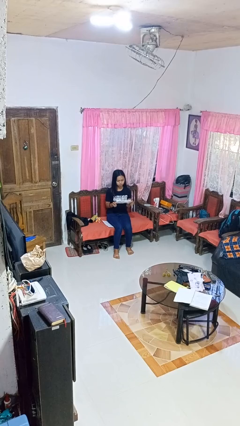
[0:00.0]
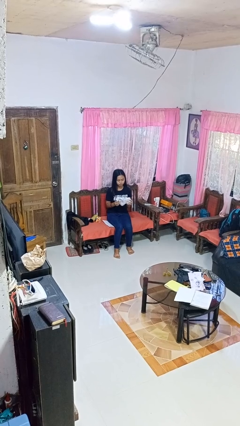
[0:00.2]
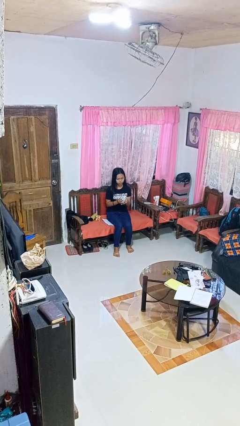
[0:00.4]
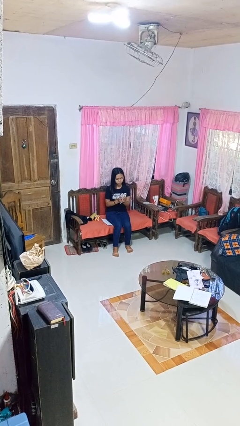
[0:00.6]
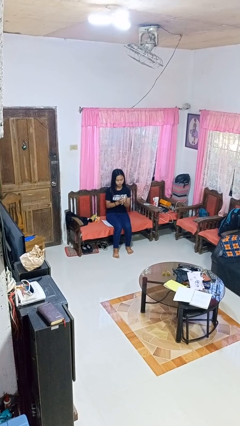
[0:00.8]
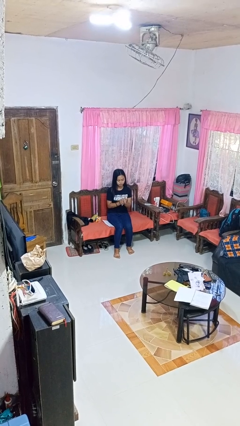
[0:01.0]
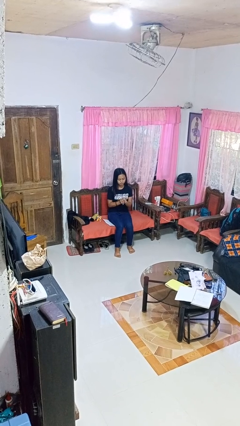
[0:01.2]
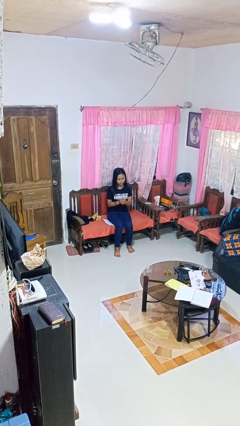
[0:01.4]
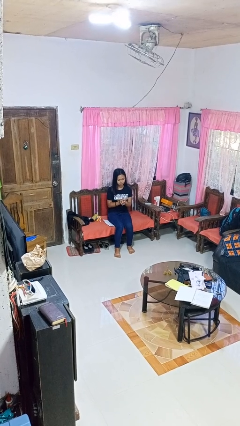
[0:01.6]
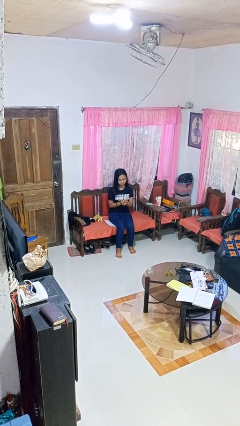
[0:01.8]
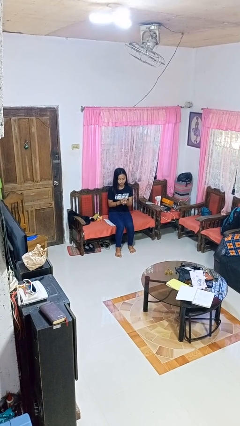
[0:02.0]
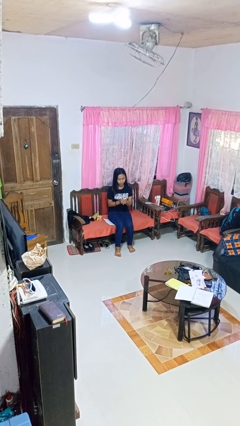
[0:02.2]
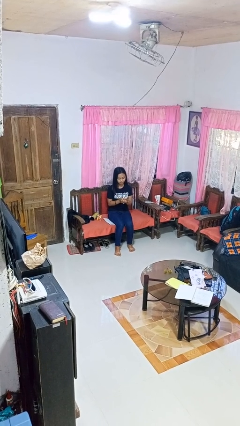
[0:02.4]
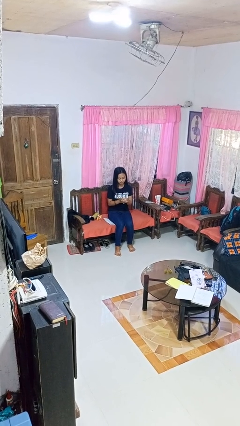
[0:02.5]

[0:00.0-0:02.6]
person crumples paper

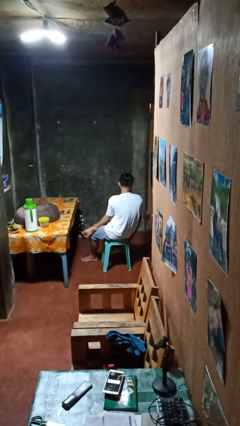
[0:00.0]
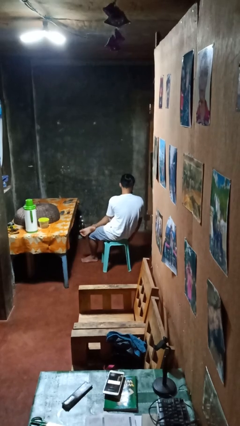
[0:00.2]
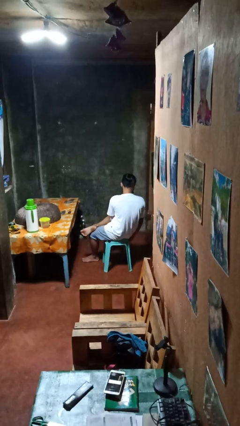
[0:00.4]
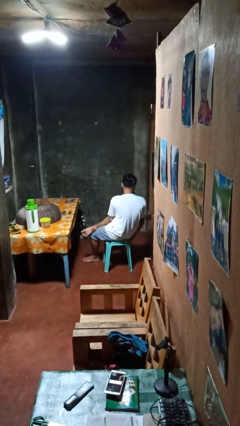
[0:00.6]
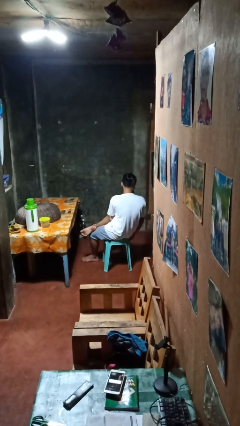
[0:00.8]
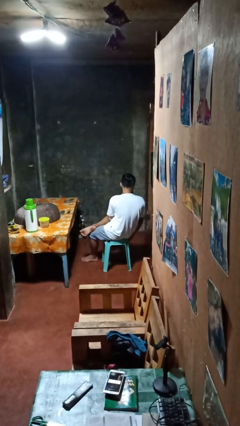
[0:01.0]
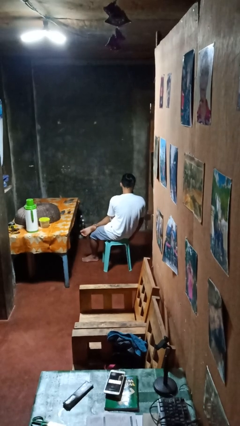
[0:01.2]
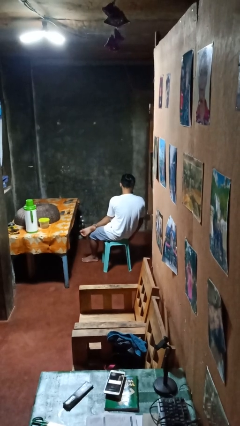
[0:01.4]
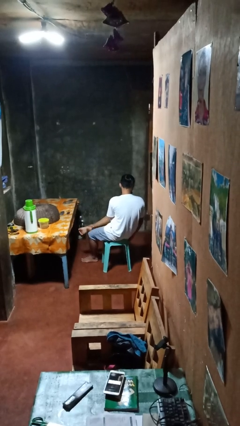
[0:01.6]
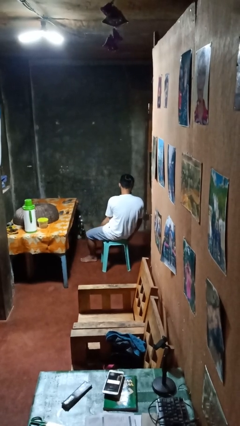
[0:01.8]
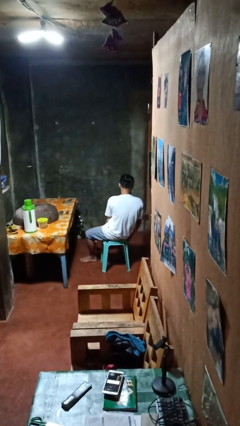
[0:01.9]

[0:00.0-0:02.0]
person crosses legs

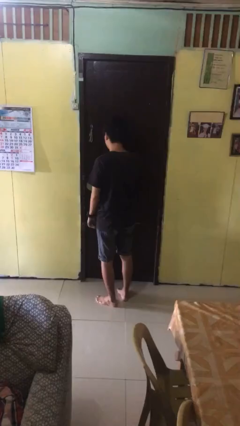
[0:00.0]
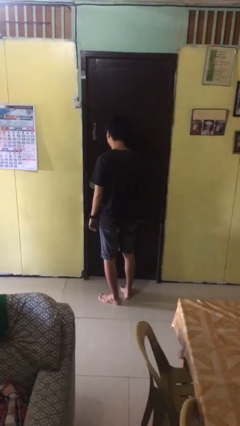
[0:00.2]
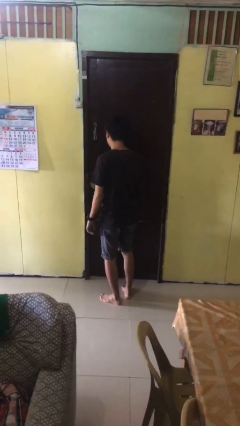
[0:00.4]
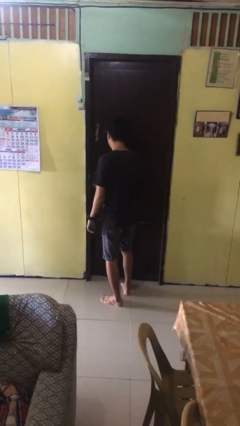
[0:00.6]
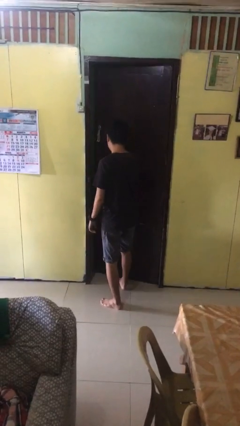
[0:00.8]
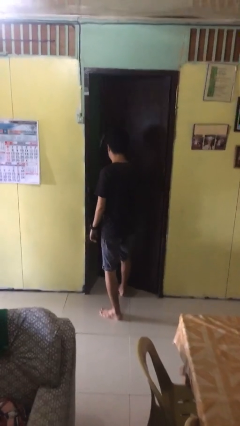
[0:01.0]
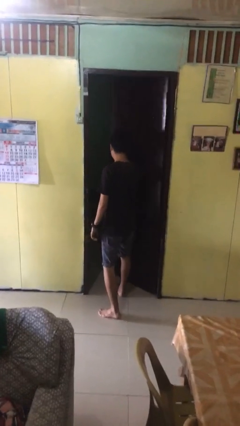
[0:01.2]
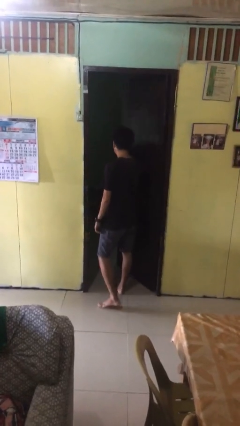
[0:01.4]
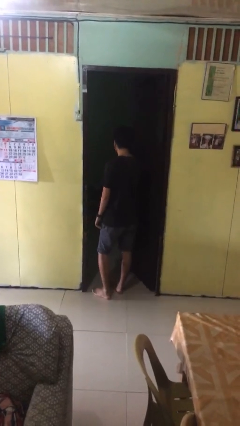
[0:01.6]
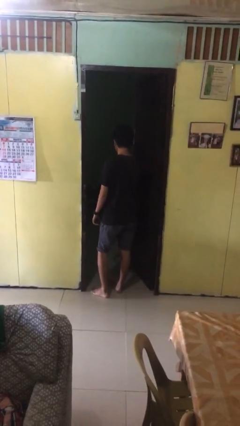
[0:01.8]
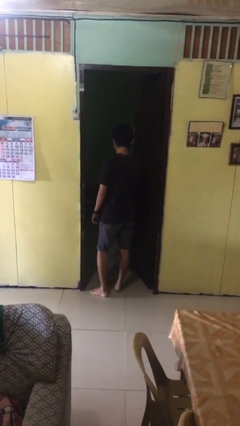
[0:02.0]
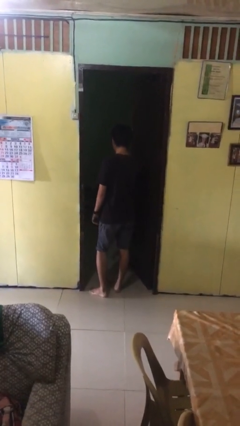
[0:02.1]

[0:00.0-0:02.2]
person opens facility door

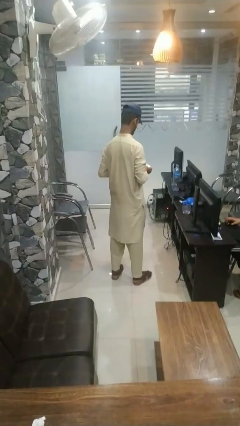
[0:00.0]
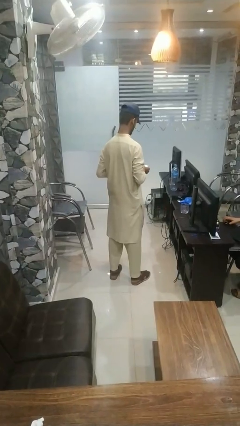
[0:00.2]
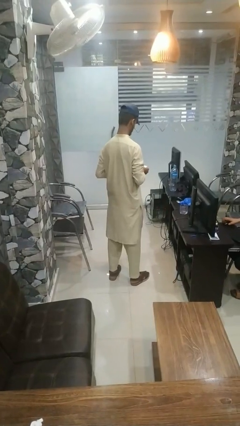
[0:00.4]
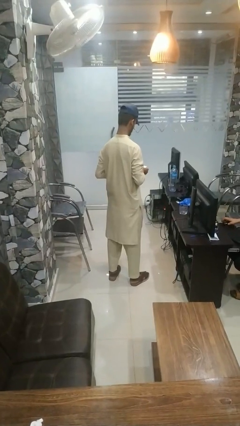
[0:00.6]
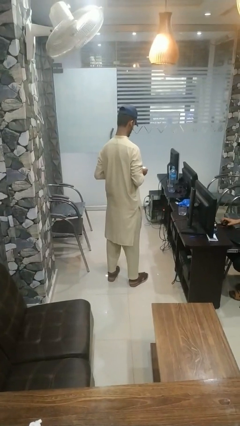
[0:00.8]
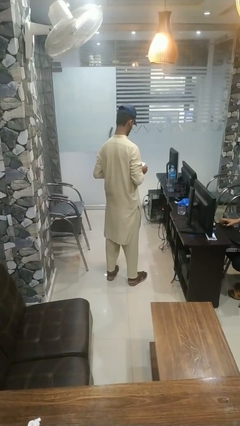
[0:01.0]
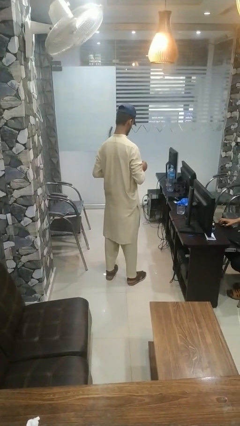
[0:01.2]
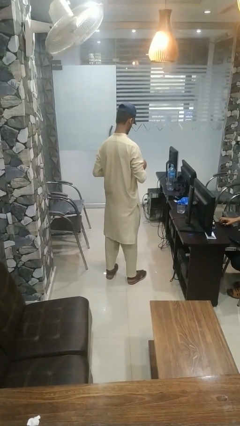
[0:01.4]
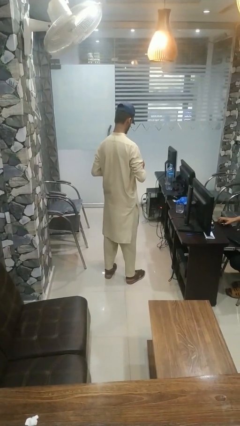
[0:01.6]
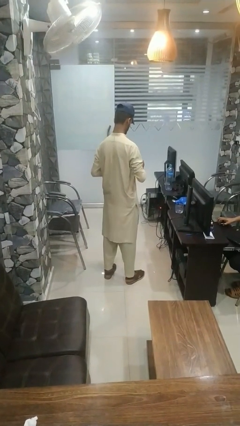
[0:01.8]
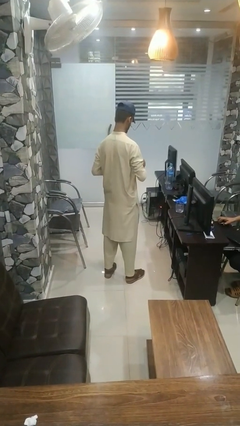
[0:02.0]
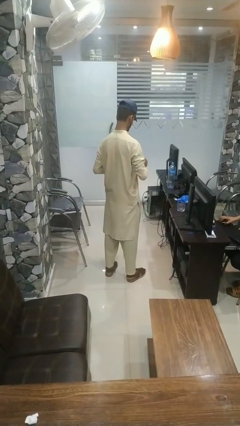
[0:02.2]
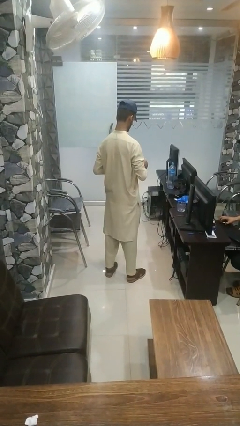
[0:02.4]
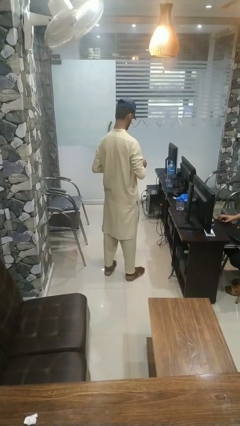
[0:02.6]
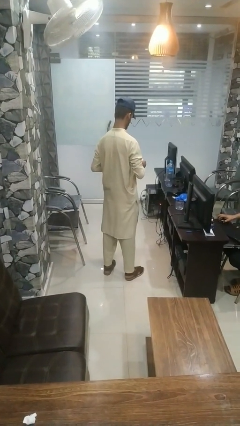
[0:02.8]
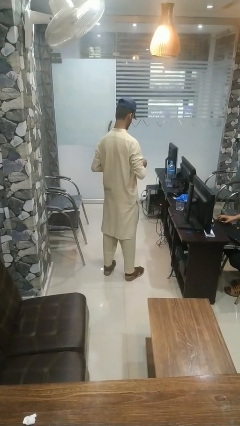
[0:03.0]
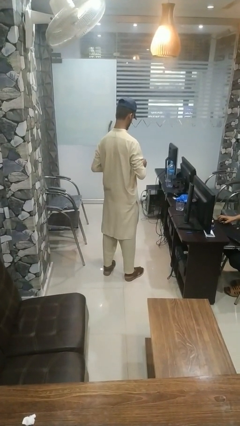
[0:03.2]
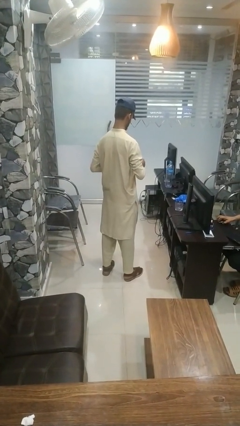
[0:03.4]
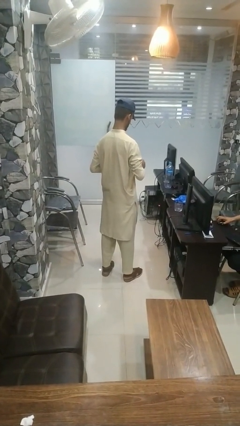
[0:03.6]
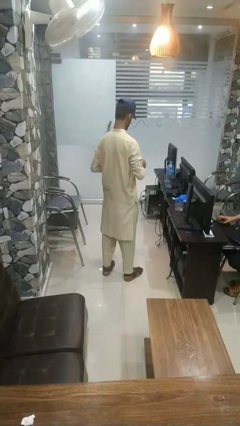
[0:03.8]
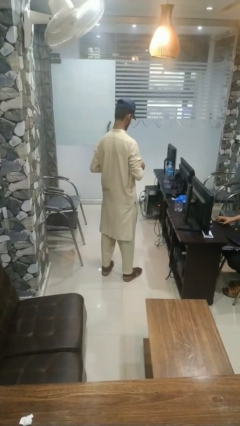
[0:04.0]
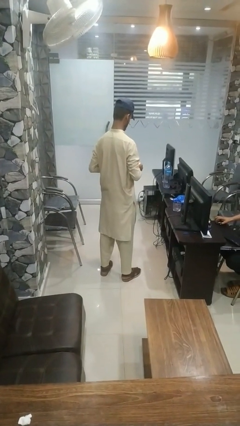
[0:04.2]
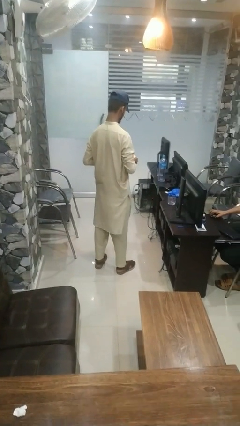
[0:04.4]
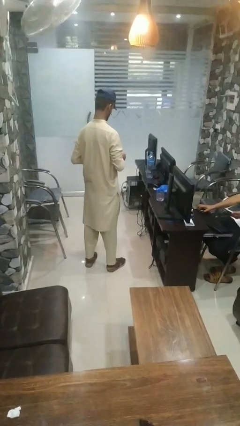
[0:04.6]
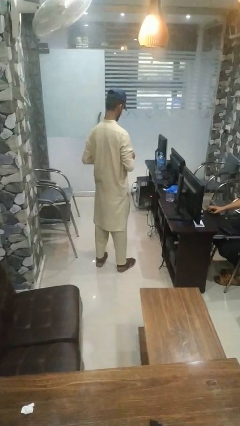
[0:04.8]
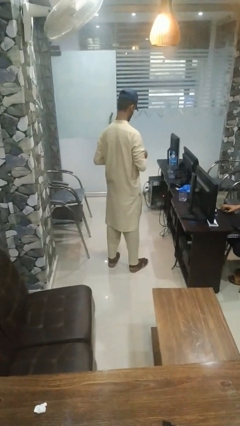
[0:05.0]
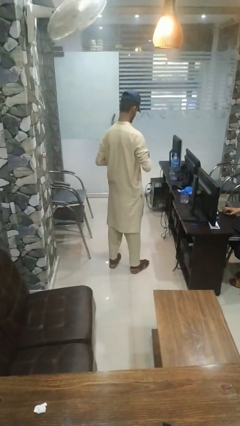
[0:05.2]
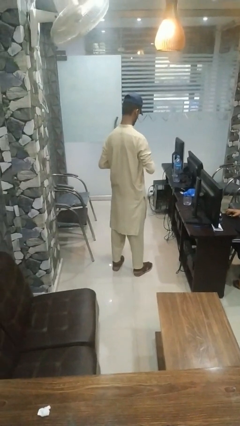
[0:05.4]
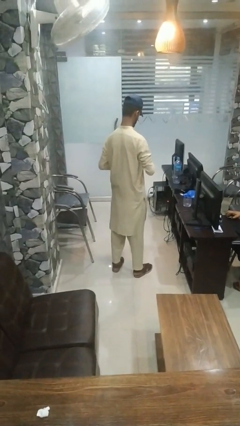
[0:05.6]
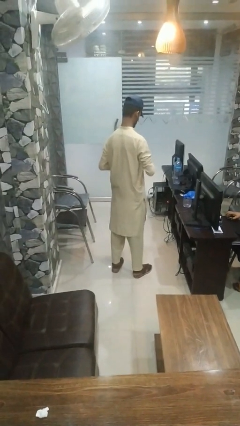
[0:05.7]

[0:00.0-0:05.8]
person takes object from purse

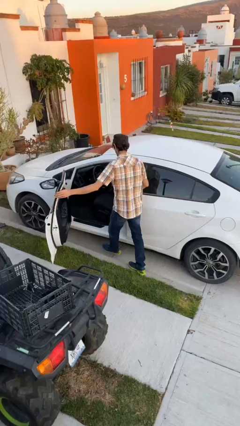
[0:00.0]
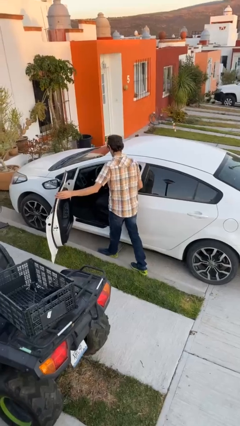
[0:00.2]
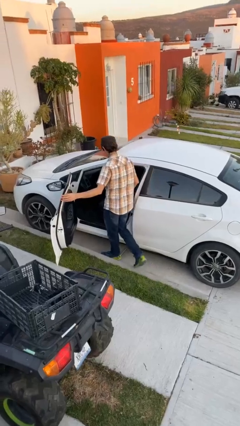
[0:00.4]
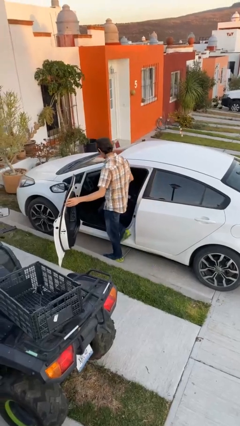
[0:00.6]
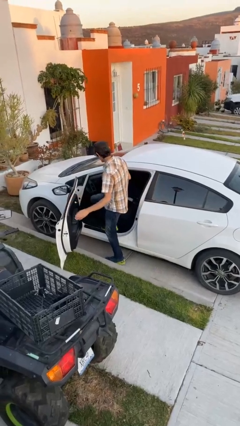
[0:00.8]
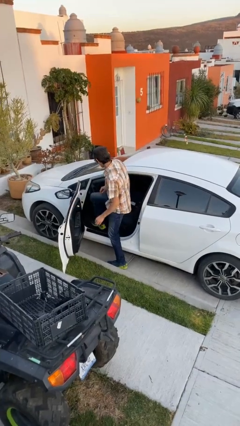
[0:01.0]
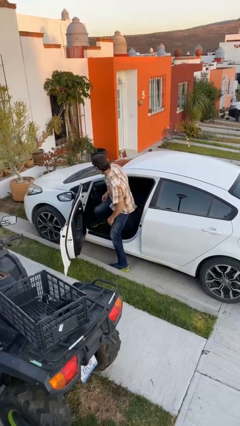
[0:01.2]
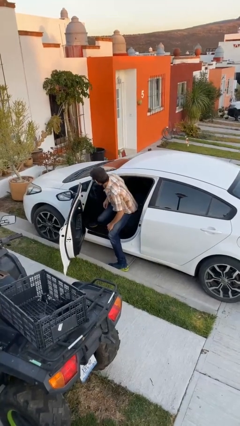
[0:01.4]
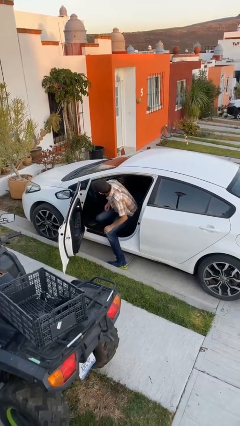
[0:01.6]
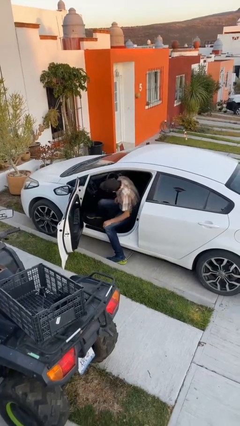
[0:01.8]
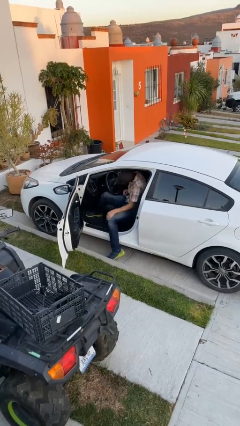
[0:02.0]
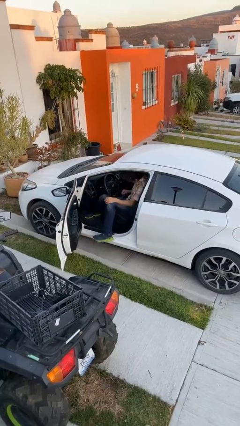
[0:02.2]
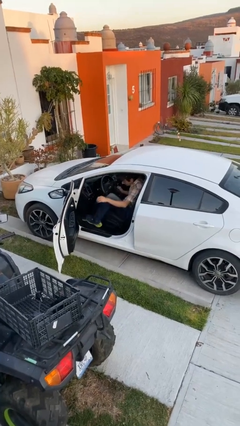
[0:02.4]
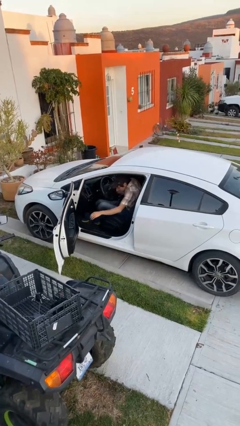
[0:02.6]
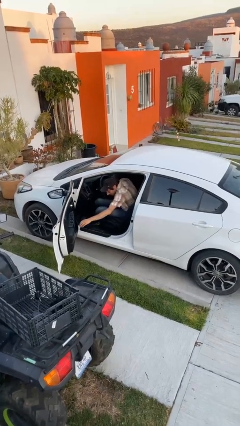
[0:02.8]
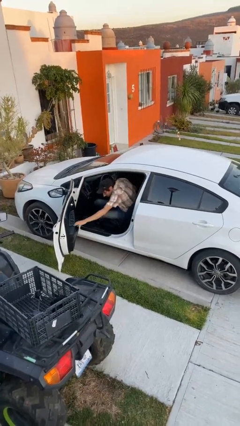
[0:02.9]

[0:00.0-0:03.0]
person enters car

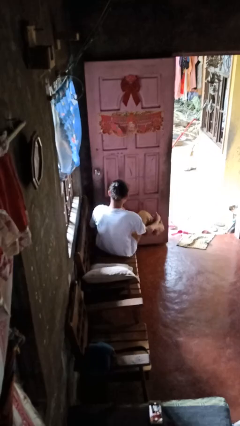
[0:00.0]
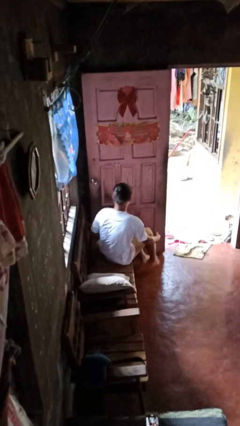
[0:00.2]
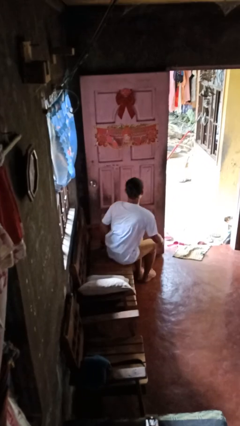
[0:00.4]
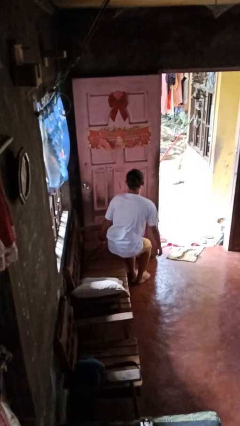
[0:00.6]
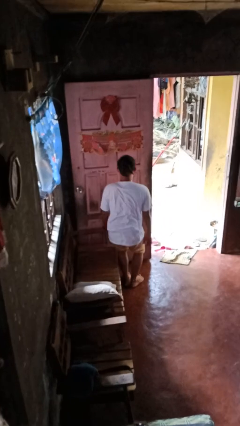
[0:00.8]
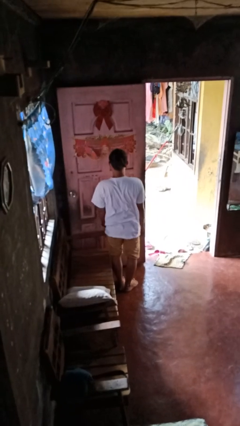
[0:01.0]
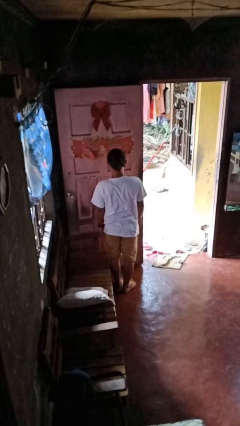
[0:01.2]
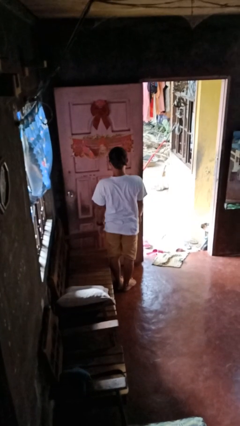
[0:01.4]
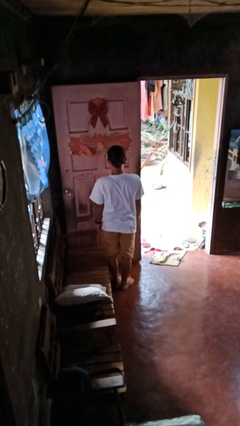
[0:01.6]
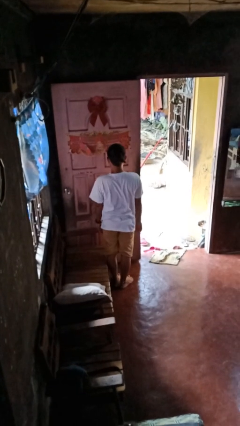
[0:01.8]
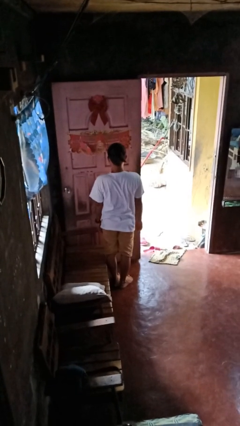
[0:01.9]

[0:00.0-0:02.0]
person stands up
